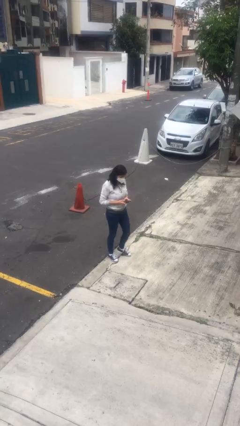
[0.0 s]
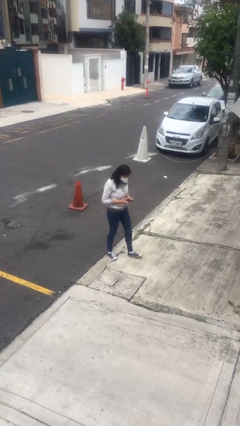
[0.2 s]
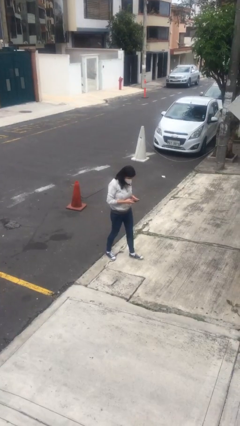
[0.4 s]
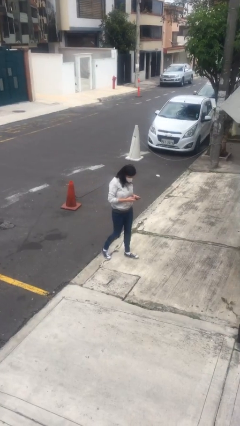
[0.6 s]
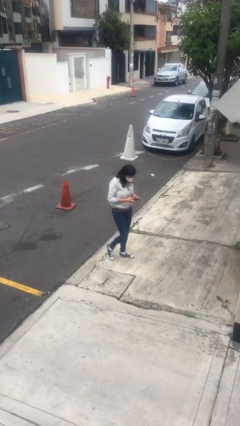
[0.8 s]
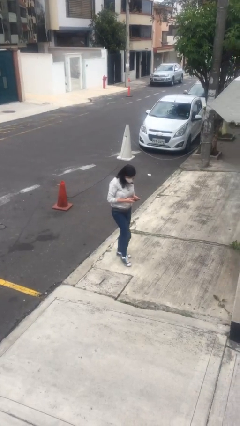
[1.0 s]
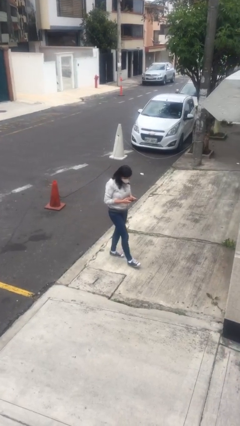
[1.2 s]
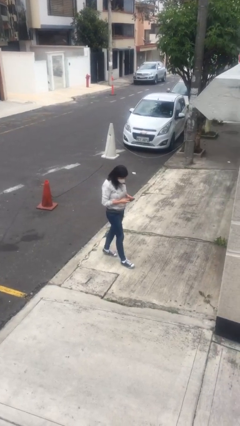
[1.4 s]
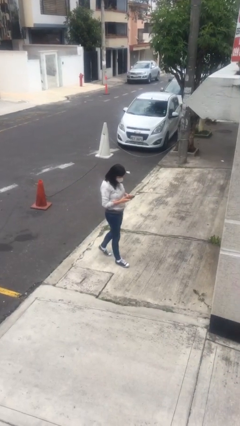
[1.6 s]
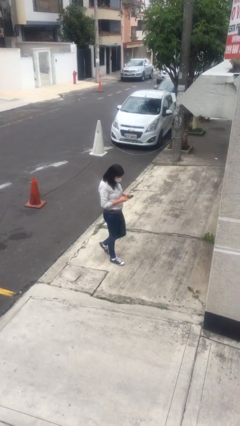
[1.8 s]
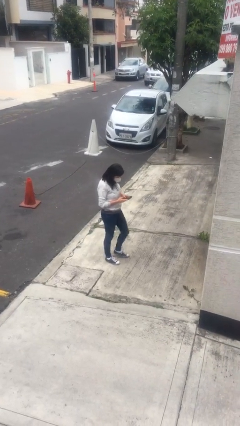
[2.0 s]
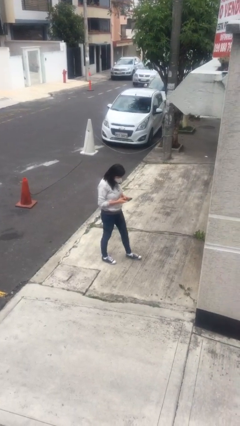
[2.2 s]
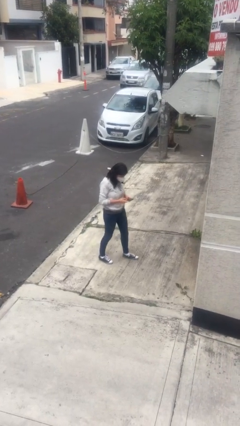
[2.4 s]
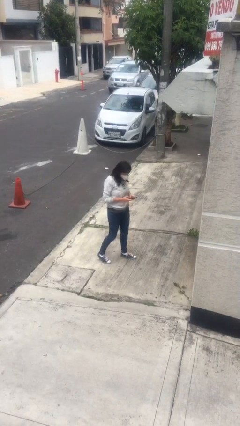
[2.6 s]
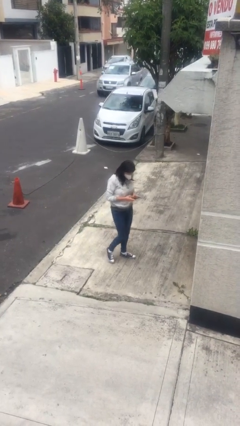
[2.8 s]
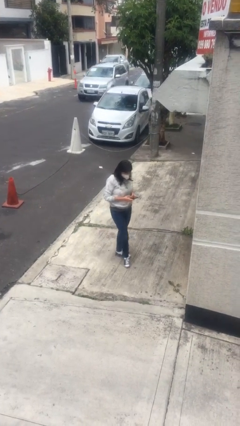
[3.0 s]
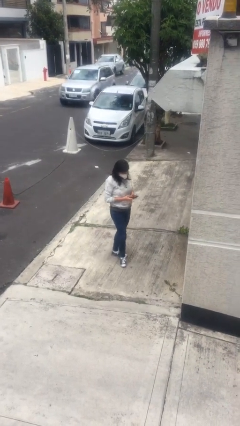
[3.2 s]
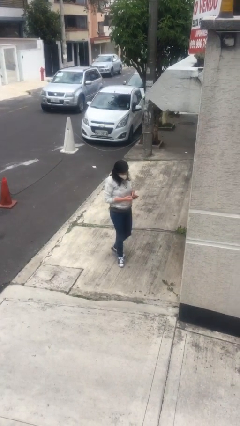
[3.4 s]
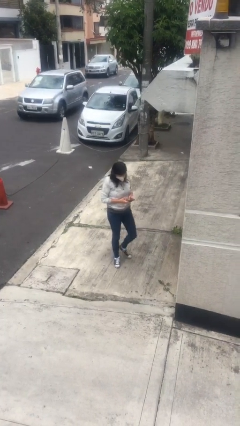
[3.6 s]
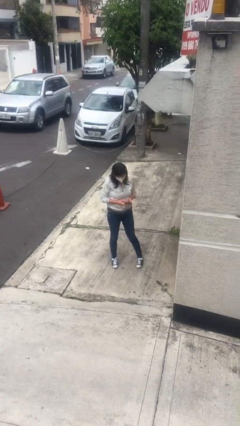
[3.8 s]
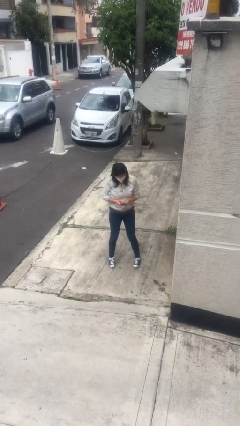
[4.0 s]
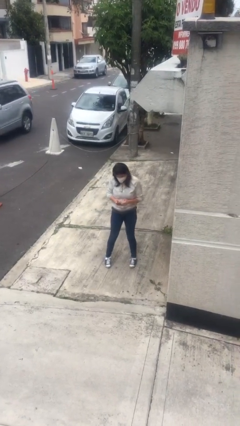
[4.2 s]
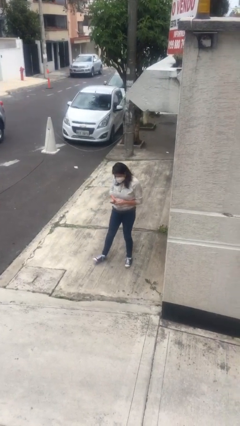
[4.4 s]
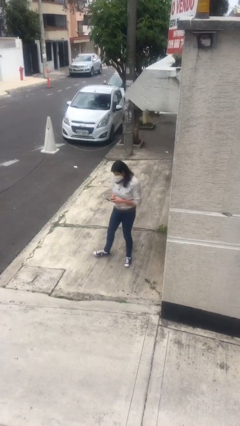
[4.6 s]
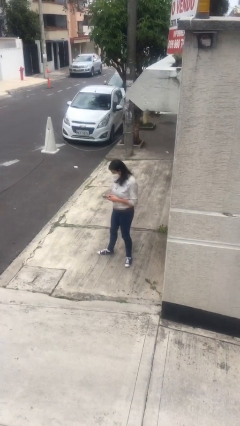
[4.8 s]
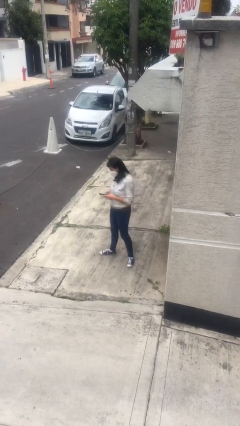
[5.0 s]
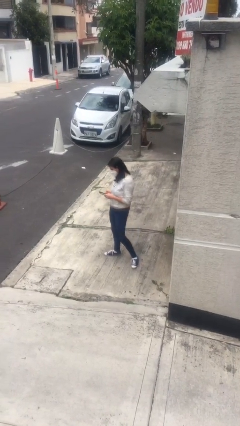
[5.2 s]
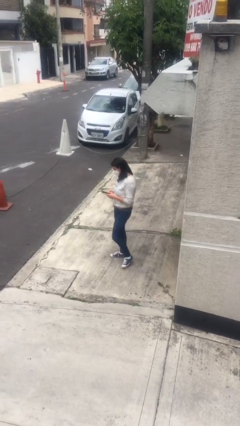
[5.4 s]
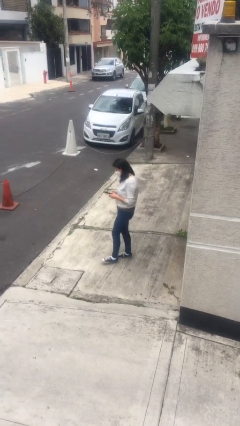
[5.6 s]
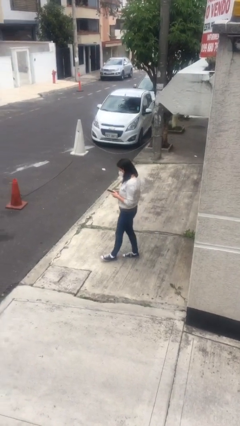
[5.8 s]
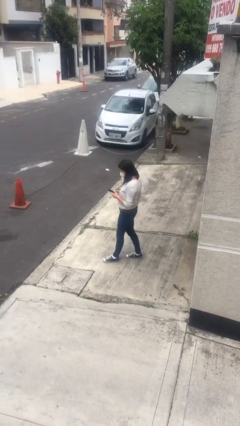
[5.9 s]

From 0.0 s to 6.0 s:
person texts on phone

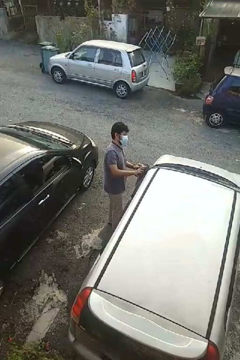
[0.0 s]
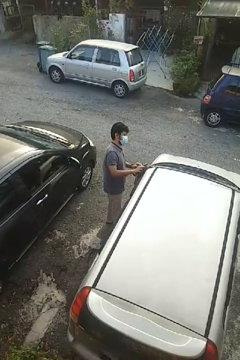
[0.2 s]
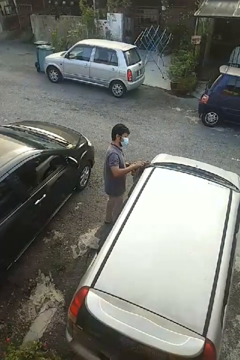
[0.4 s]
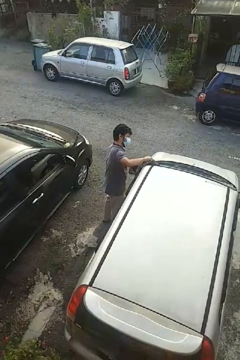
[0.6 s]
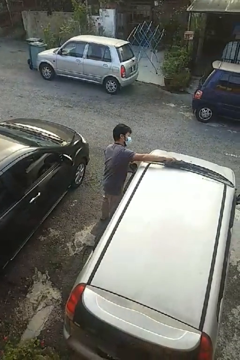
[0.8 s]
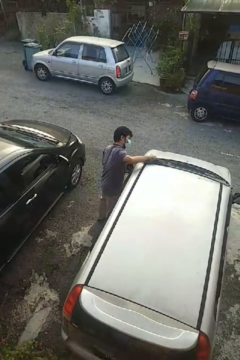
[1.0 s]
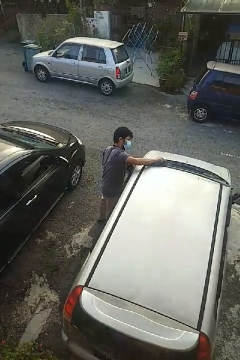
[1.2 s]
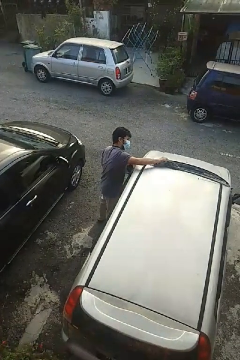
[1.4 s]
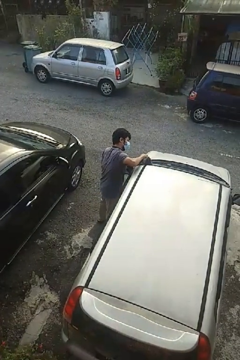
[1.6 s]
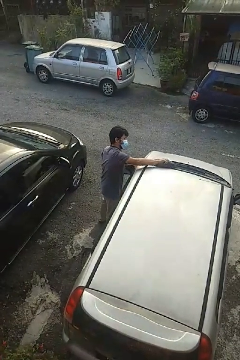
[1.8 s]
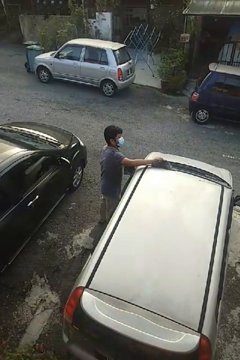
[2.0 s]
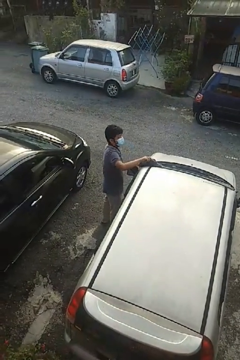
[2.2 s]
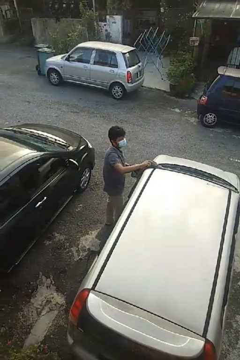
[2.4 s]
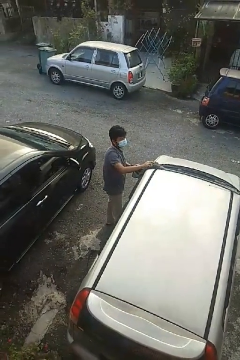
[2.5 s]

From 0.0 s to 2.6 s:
person polishes car with rag

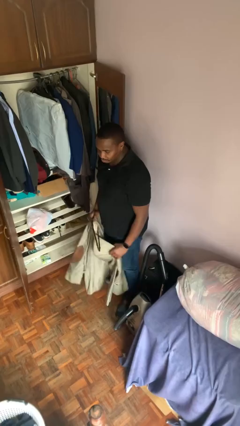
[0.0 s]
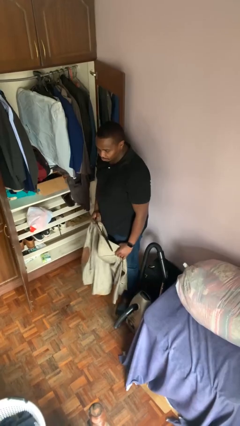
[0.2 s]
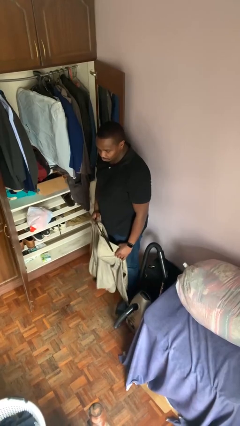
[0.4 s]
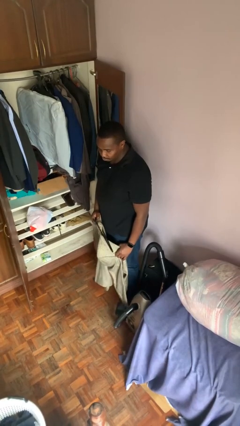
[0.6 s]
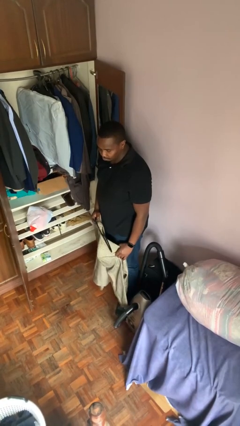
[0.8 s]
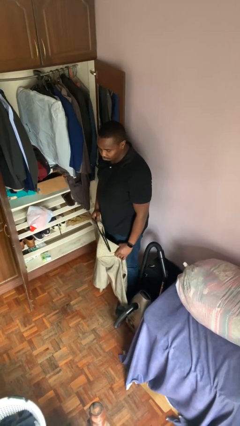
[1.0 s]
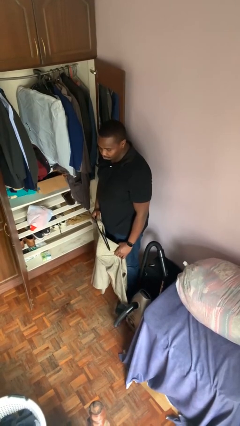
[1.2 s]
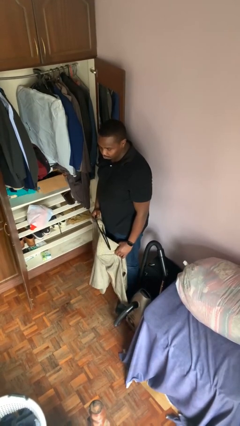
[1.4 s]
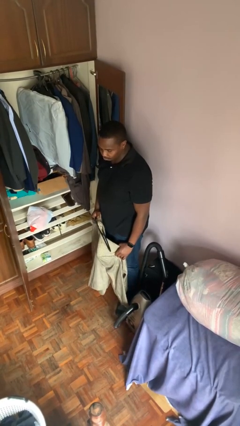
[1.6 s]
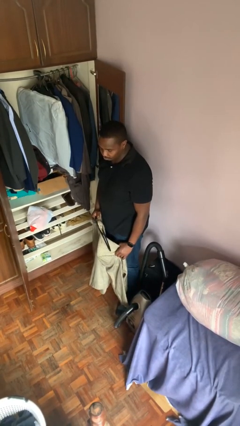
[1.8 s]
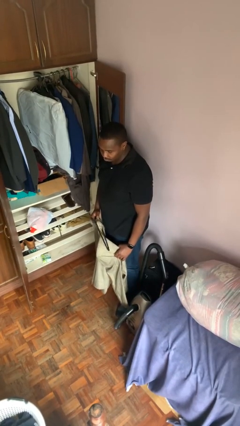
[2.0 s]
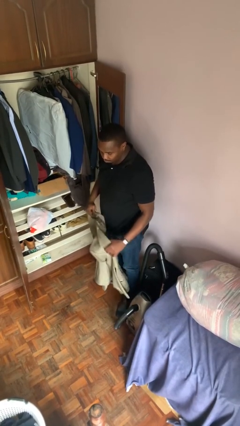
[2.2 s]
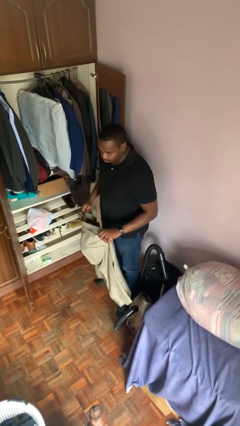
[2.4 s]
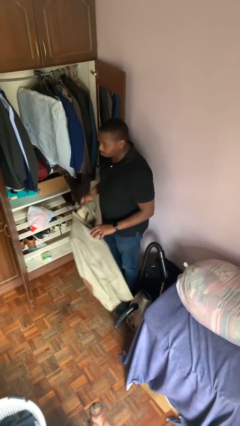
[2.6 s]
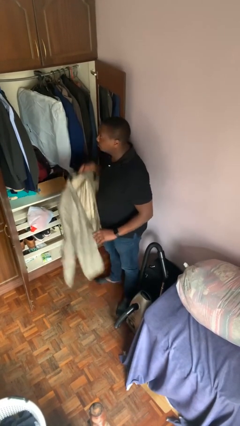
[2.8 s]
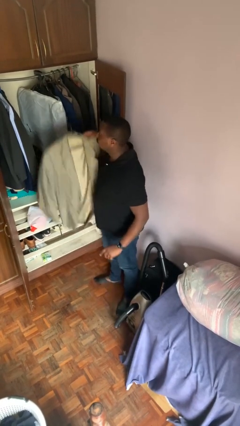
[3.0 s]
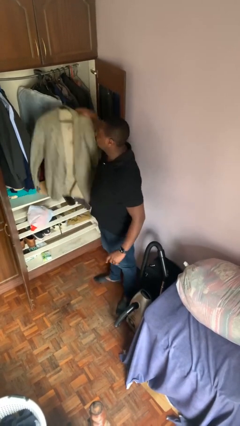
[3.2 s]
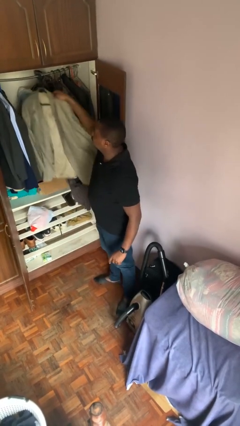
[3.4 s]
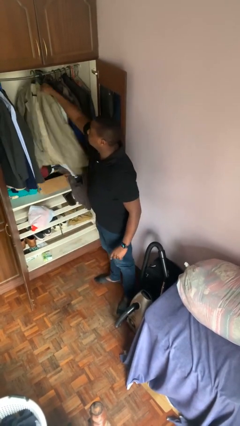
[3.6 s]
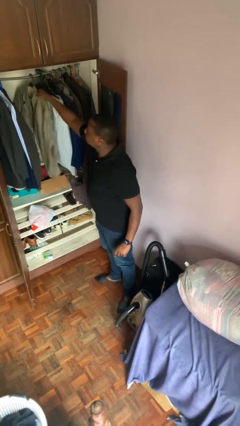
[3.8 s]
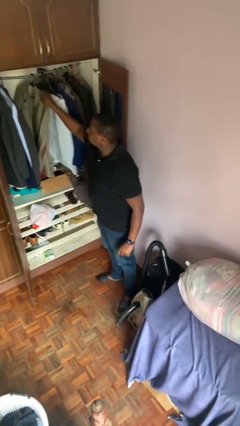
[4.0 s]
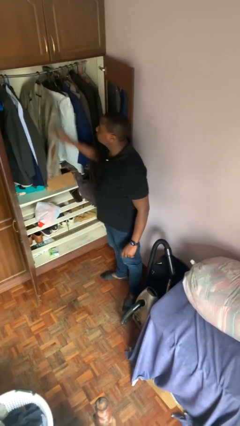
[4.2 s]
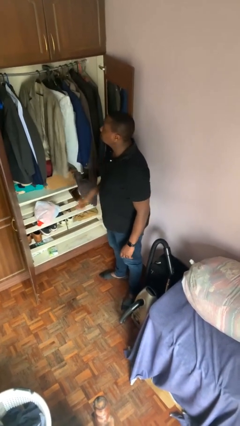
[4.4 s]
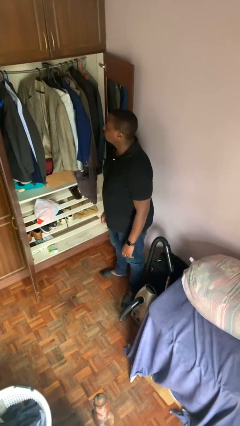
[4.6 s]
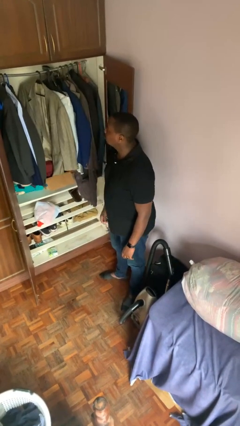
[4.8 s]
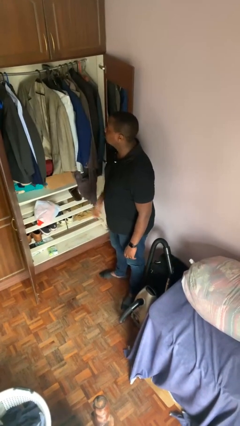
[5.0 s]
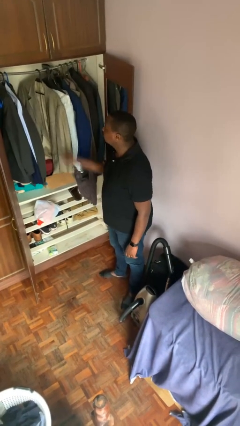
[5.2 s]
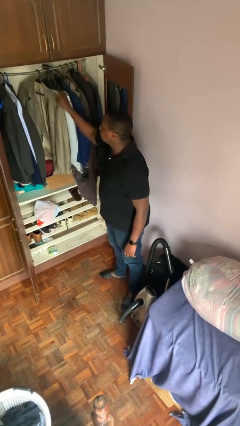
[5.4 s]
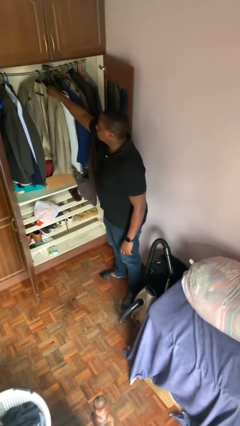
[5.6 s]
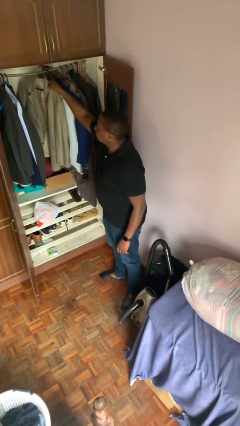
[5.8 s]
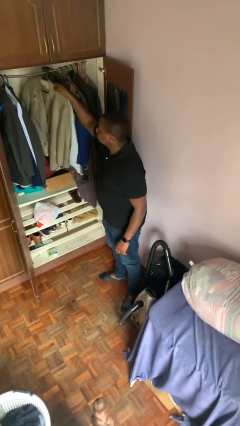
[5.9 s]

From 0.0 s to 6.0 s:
person puts clothes into closet

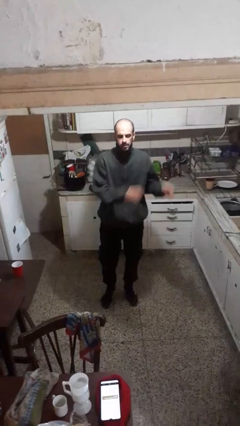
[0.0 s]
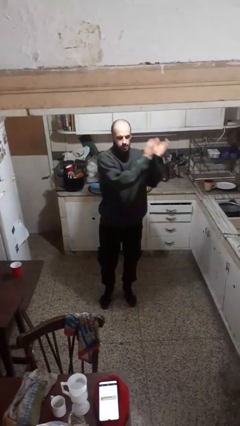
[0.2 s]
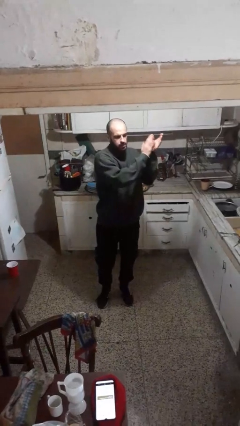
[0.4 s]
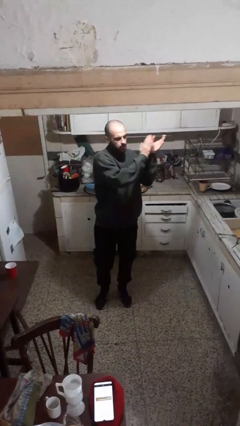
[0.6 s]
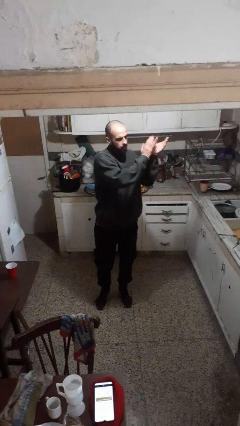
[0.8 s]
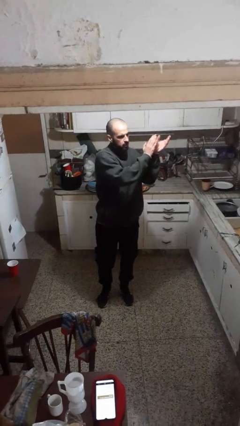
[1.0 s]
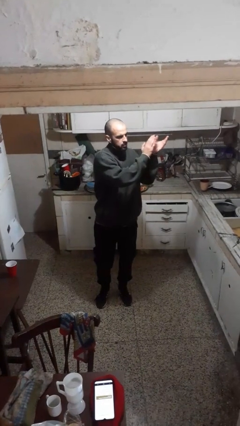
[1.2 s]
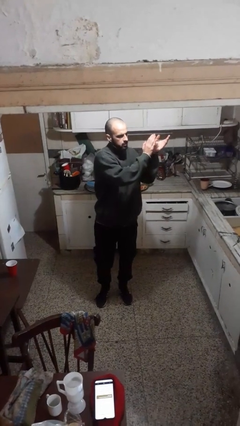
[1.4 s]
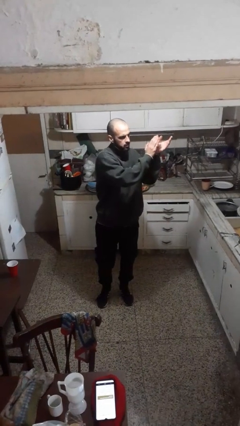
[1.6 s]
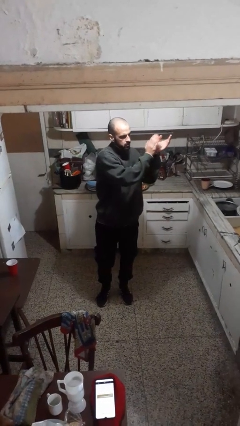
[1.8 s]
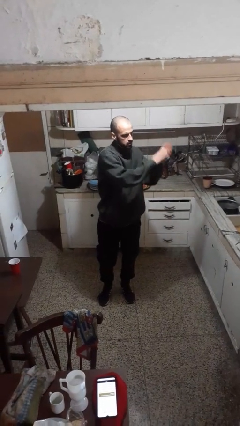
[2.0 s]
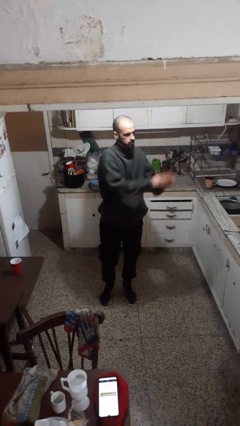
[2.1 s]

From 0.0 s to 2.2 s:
person claps hands

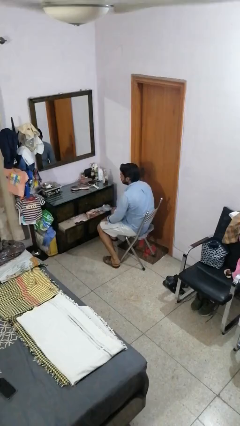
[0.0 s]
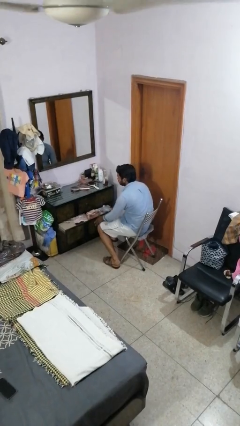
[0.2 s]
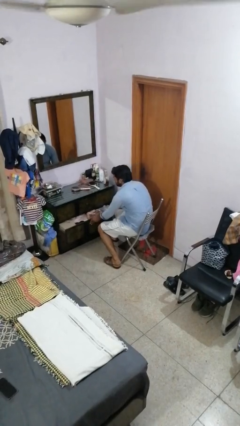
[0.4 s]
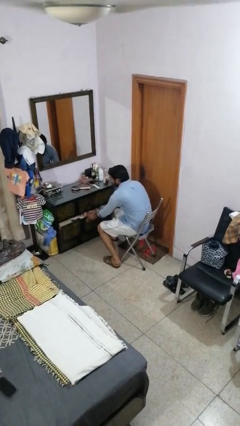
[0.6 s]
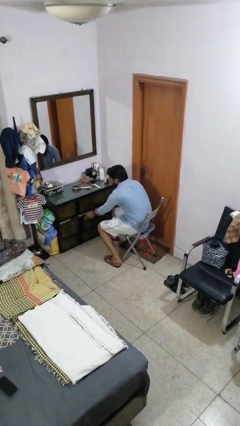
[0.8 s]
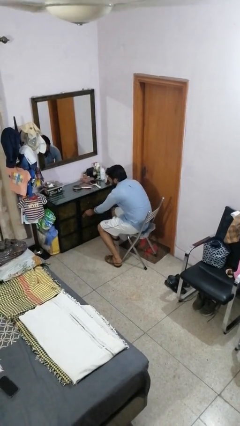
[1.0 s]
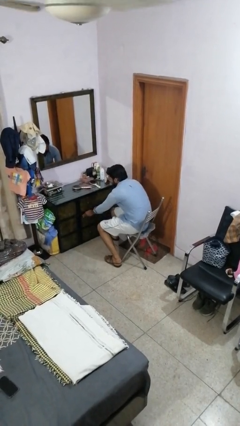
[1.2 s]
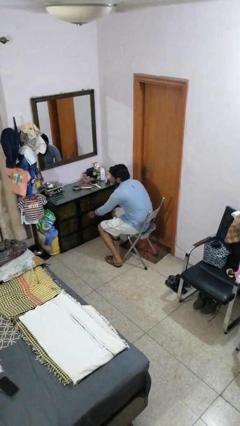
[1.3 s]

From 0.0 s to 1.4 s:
person closes dresser drawer
